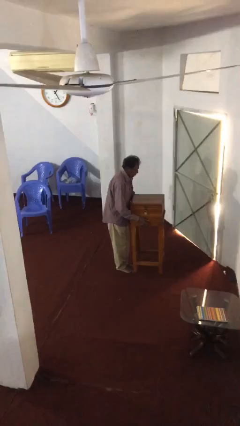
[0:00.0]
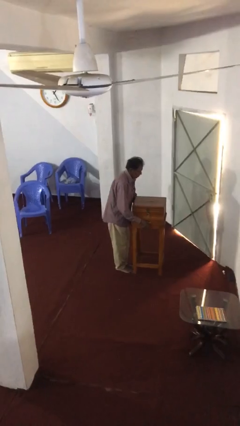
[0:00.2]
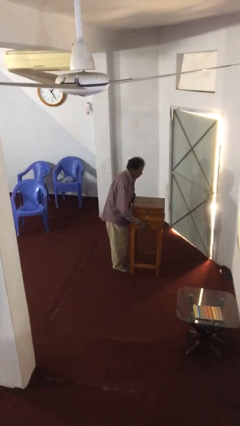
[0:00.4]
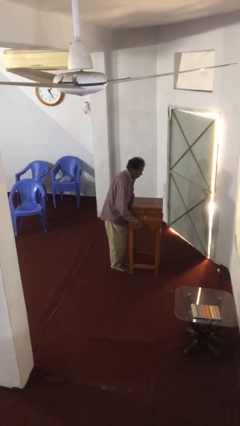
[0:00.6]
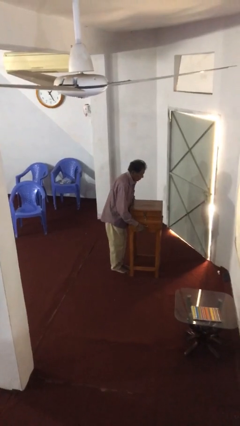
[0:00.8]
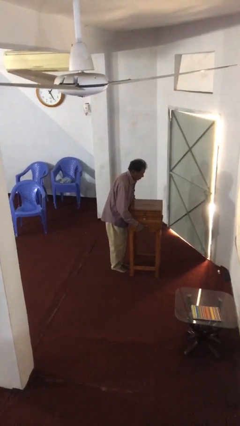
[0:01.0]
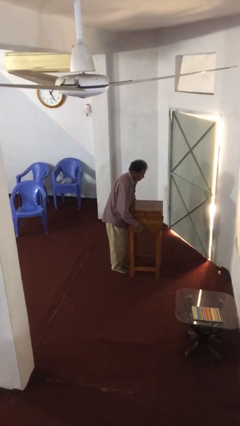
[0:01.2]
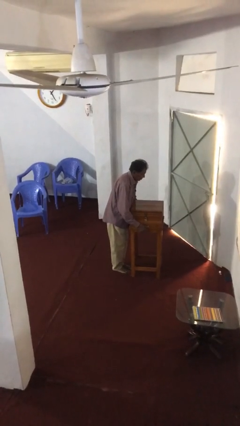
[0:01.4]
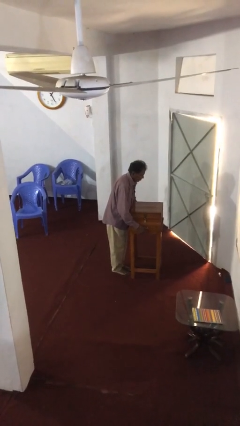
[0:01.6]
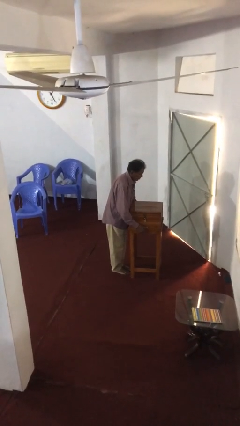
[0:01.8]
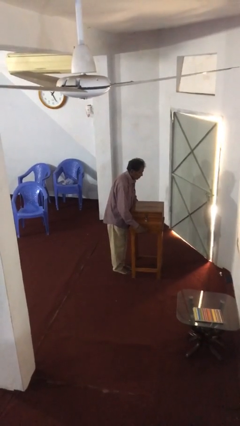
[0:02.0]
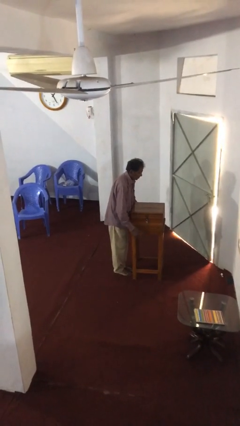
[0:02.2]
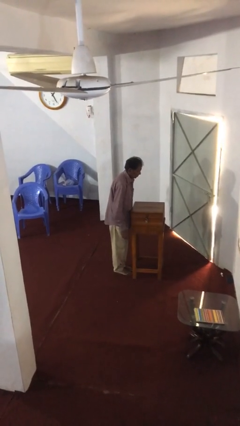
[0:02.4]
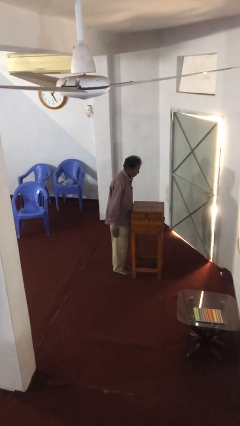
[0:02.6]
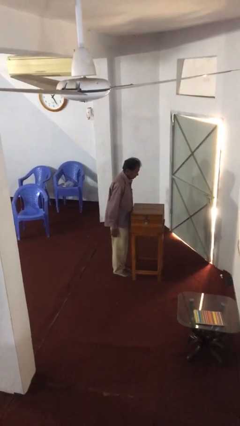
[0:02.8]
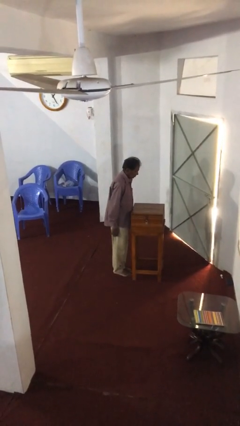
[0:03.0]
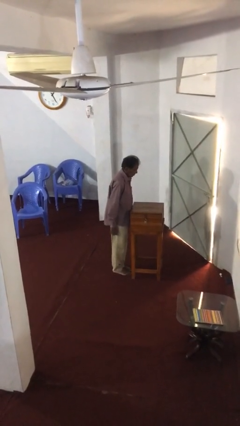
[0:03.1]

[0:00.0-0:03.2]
person puts down object on floor

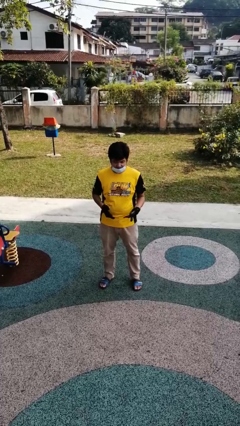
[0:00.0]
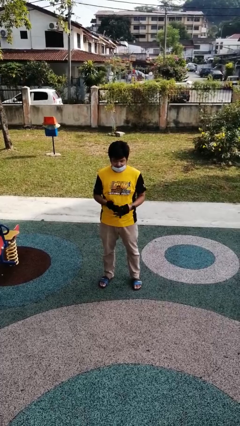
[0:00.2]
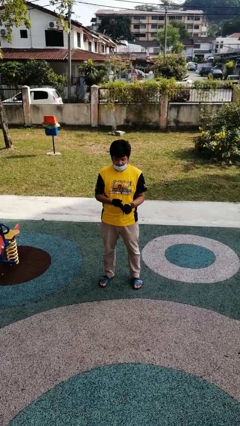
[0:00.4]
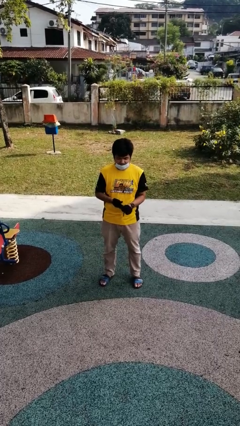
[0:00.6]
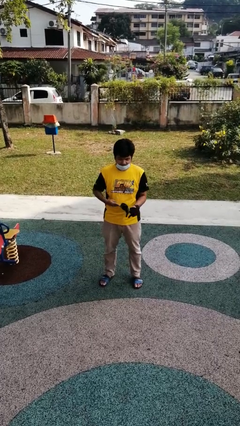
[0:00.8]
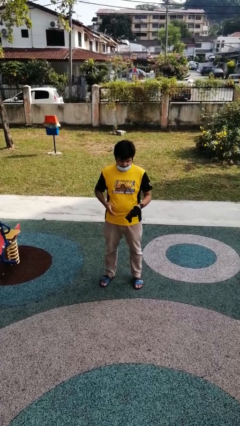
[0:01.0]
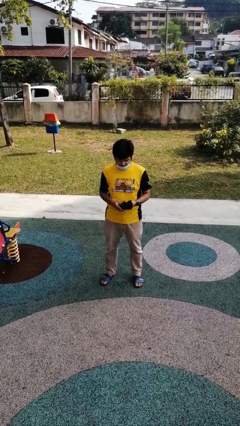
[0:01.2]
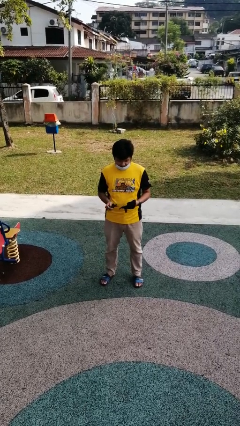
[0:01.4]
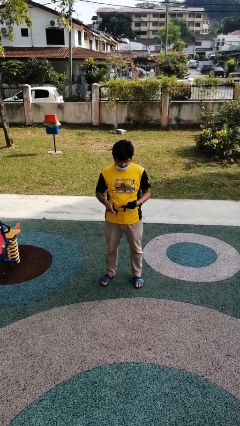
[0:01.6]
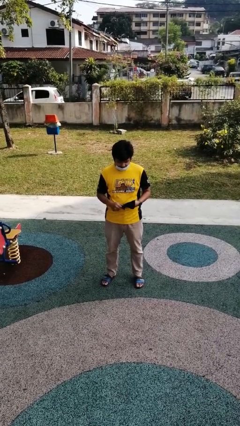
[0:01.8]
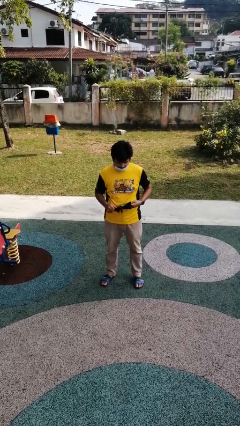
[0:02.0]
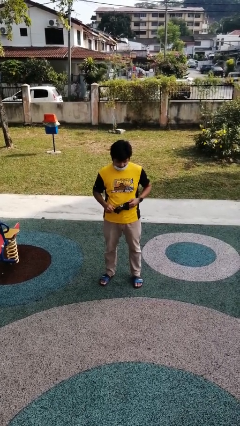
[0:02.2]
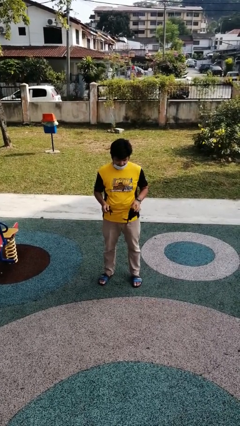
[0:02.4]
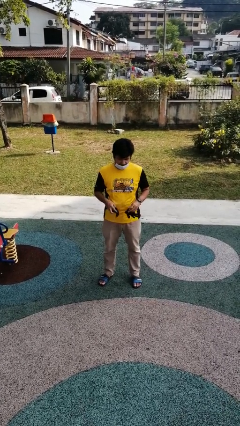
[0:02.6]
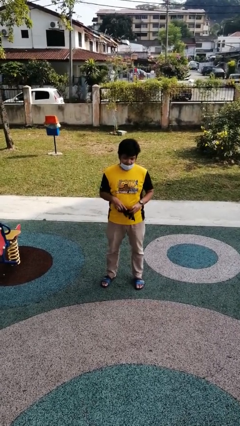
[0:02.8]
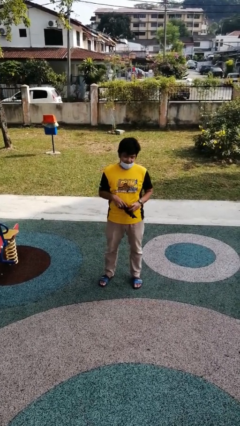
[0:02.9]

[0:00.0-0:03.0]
person takes off gloves

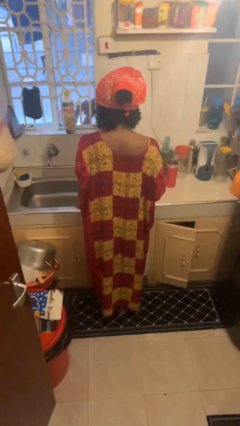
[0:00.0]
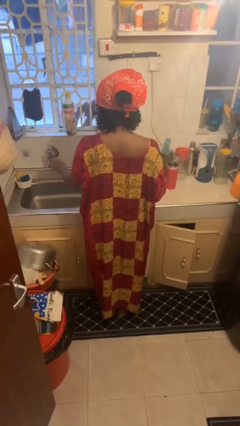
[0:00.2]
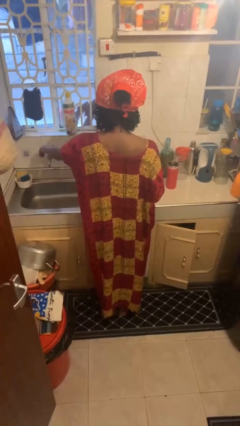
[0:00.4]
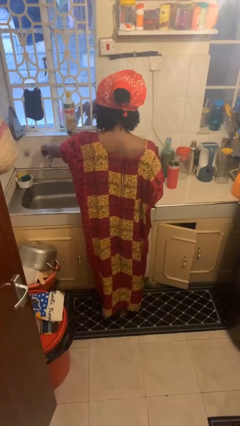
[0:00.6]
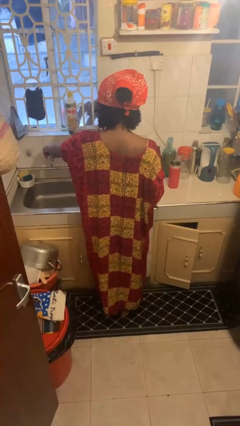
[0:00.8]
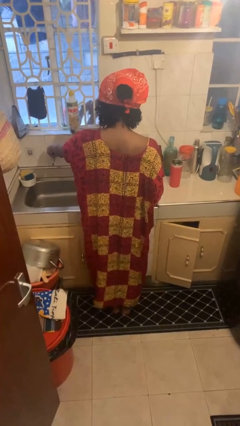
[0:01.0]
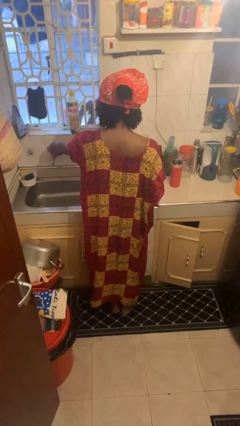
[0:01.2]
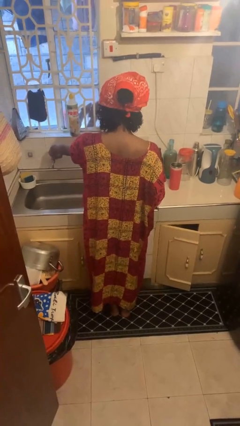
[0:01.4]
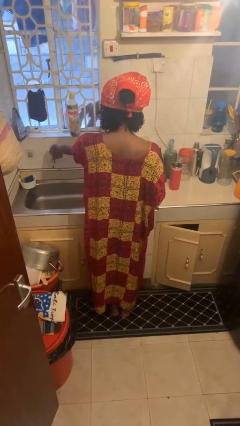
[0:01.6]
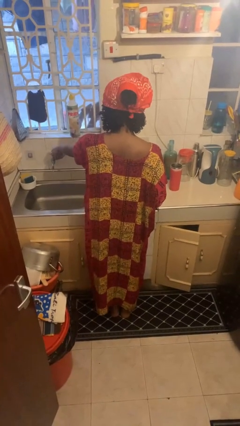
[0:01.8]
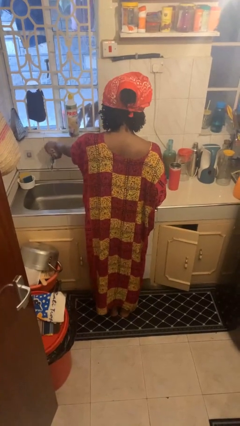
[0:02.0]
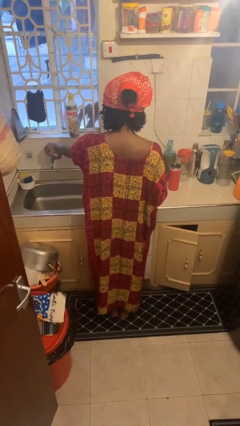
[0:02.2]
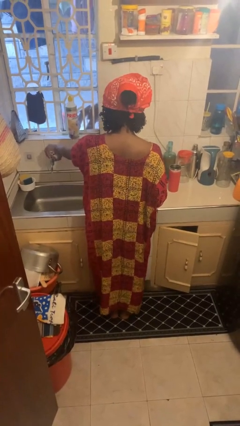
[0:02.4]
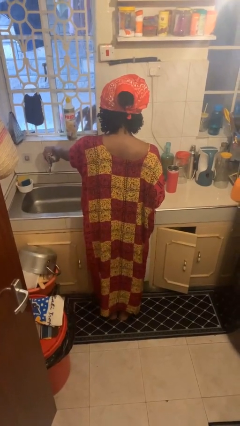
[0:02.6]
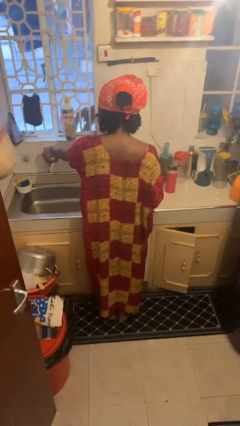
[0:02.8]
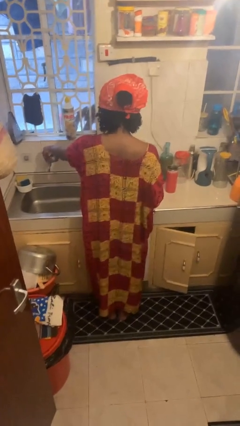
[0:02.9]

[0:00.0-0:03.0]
person turns on faucet

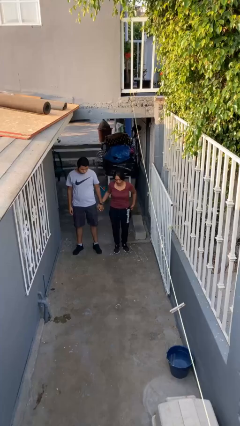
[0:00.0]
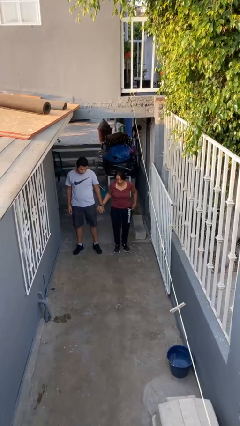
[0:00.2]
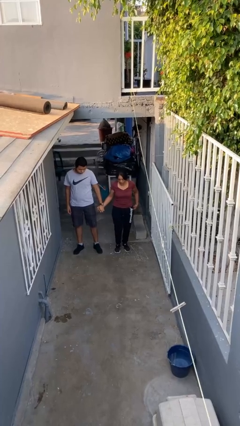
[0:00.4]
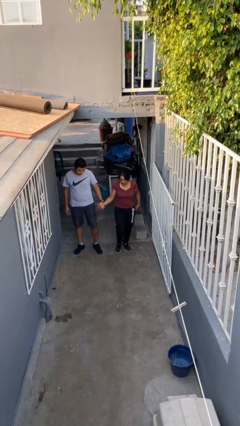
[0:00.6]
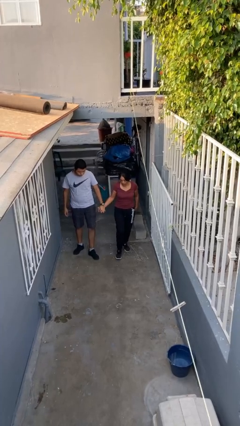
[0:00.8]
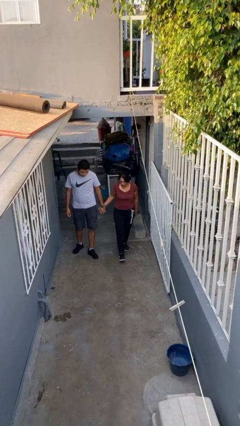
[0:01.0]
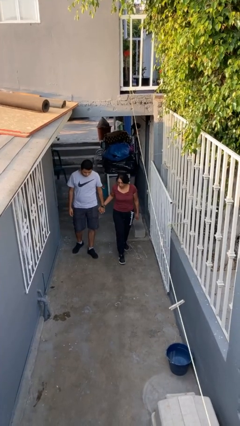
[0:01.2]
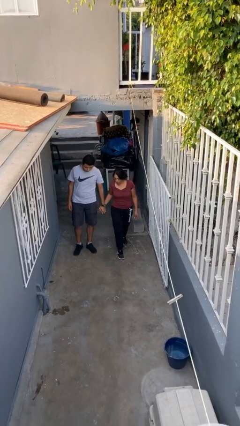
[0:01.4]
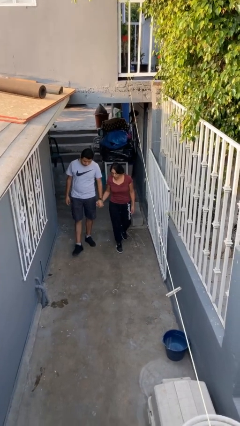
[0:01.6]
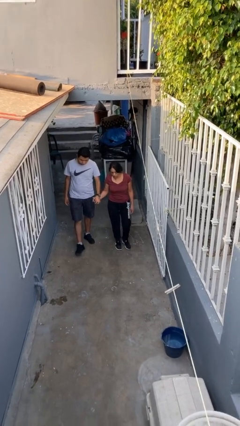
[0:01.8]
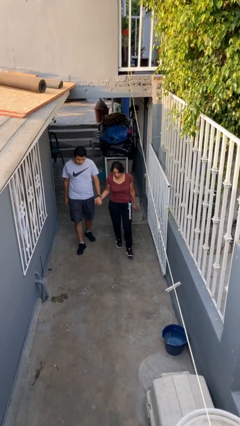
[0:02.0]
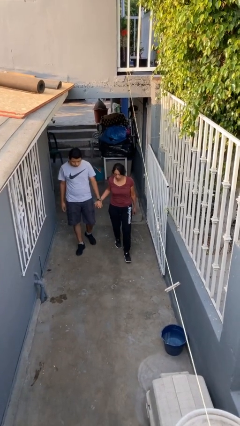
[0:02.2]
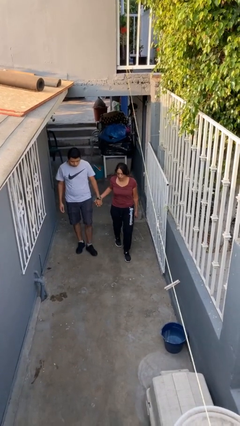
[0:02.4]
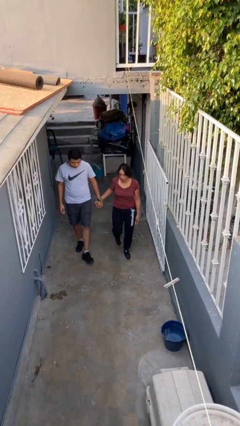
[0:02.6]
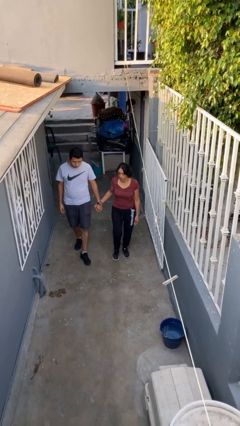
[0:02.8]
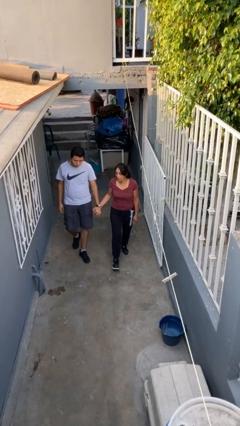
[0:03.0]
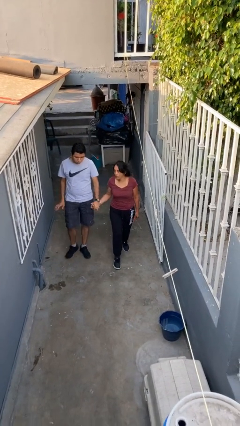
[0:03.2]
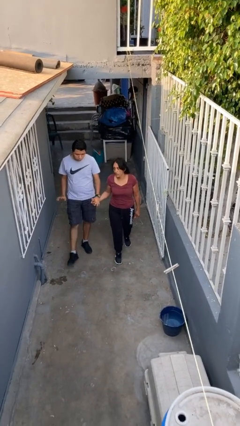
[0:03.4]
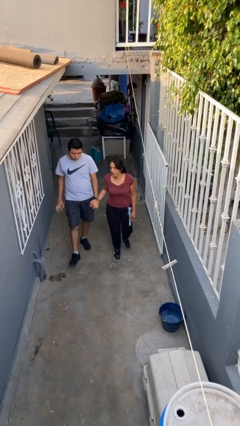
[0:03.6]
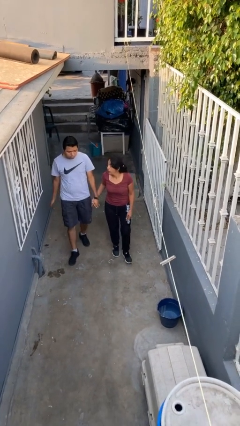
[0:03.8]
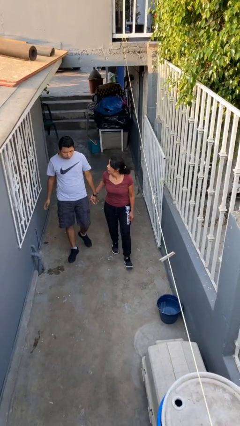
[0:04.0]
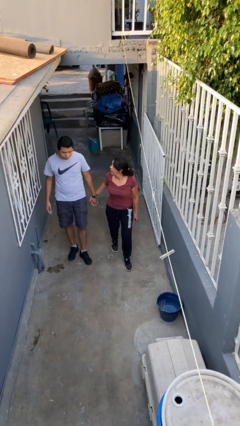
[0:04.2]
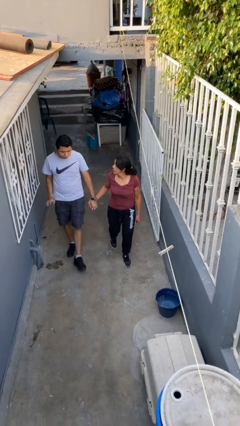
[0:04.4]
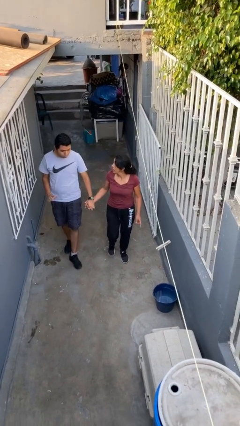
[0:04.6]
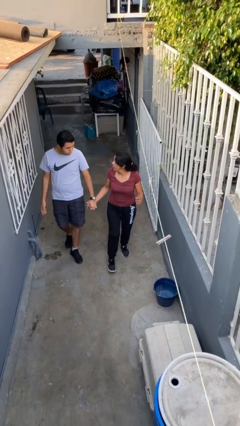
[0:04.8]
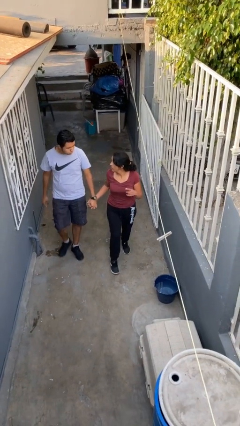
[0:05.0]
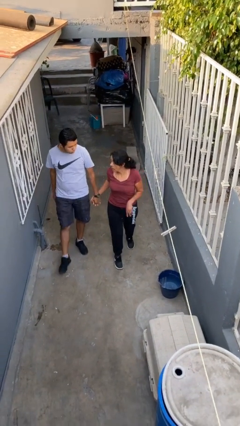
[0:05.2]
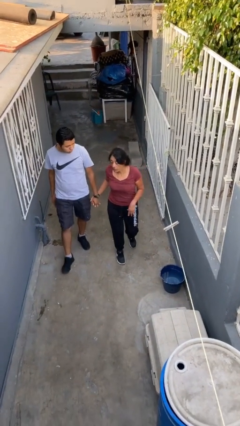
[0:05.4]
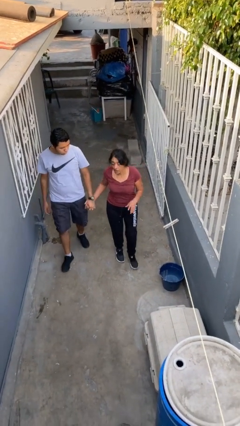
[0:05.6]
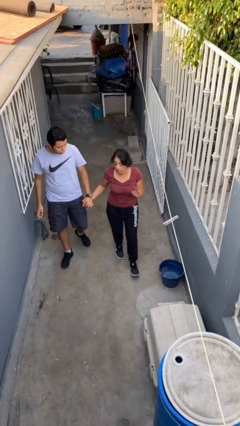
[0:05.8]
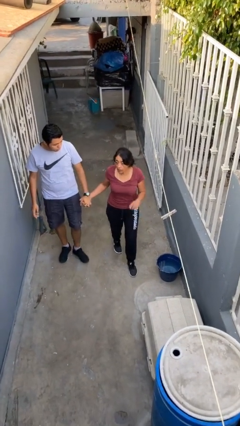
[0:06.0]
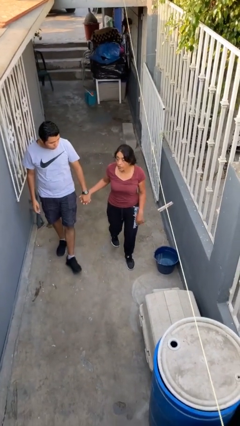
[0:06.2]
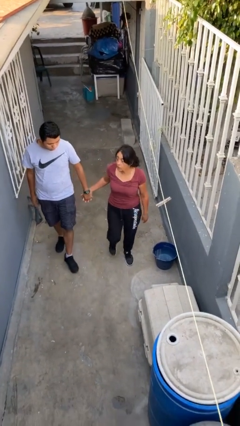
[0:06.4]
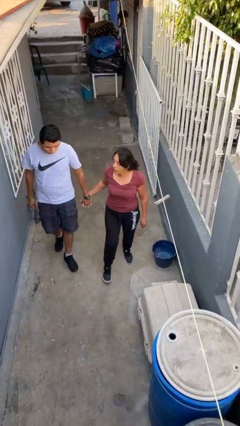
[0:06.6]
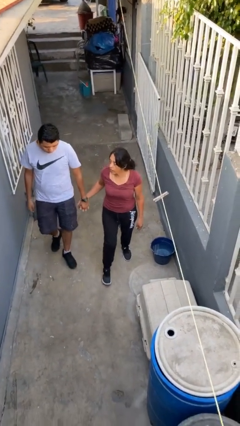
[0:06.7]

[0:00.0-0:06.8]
person holds hand

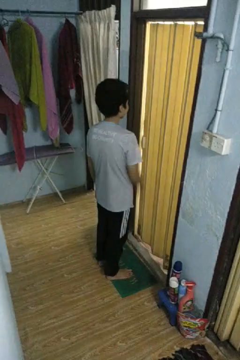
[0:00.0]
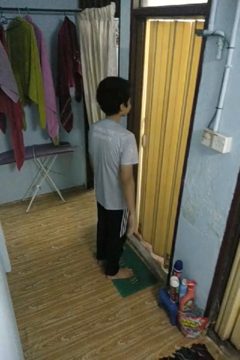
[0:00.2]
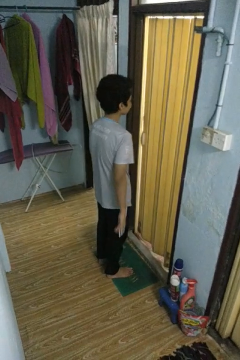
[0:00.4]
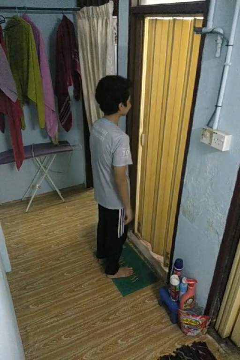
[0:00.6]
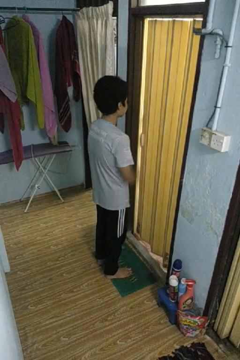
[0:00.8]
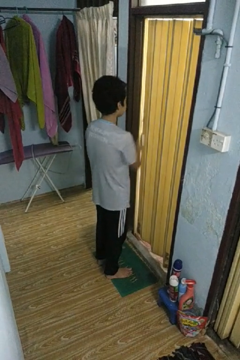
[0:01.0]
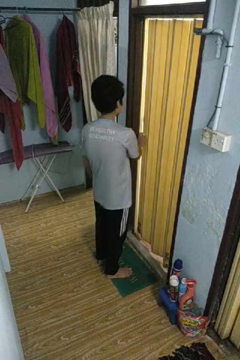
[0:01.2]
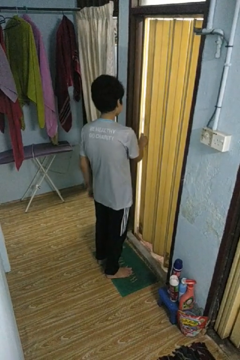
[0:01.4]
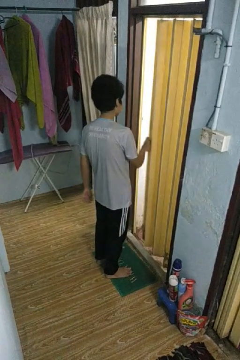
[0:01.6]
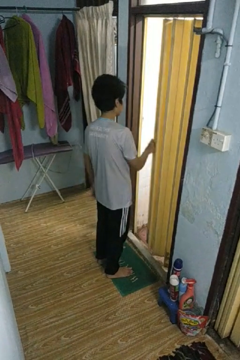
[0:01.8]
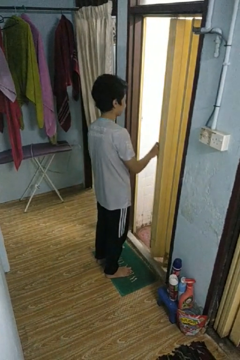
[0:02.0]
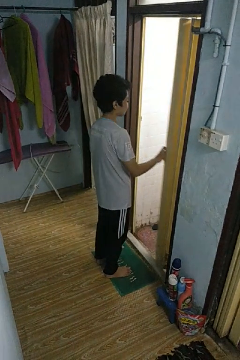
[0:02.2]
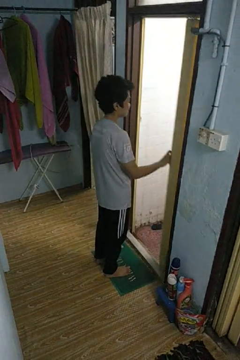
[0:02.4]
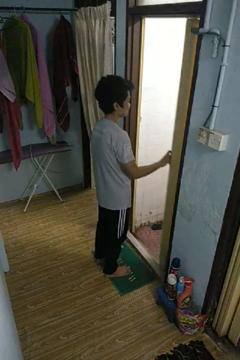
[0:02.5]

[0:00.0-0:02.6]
person opens sliding door
